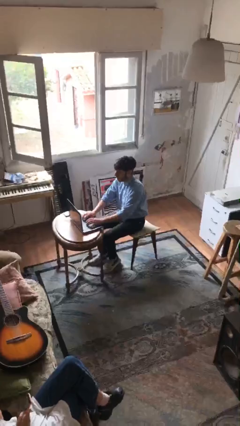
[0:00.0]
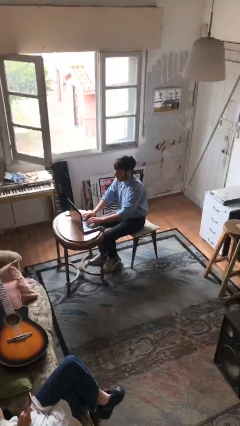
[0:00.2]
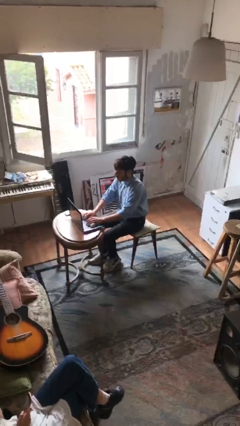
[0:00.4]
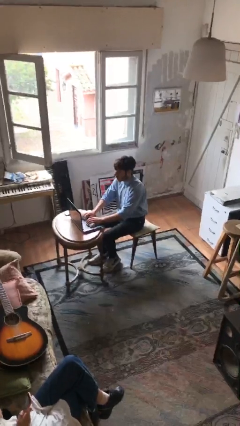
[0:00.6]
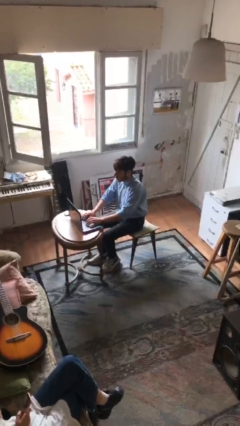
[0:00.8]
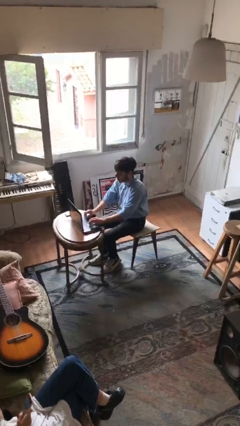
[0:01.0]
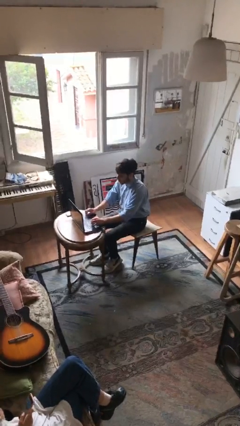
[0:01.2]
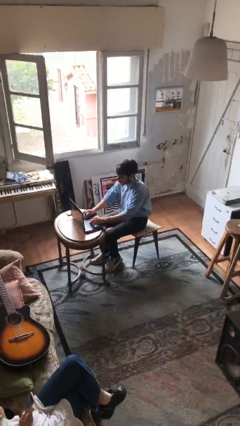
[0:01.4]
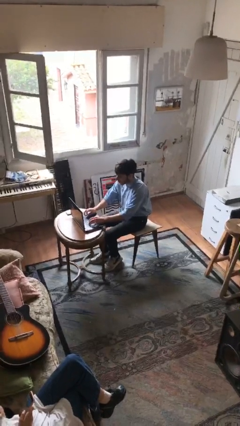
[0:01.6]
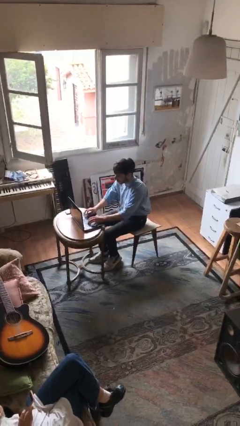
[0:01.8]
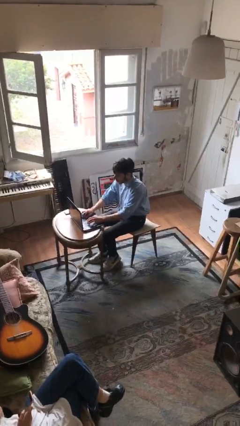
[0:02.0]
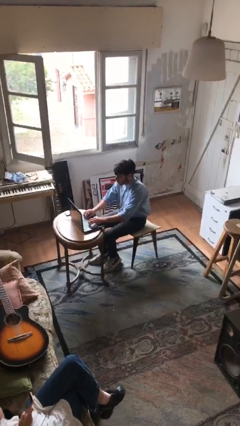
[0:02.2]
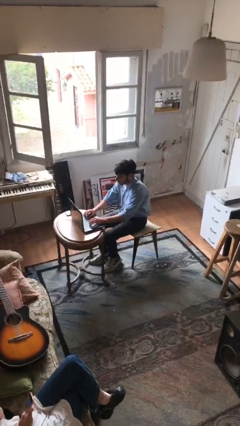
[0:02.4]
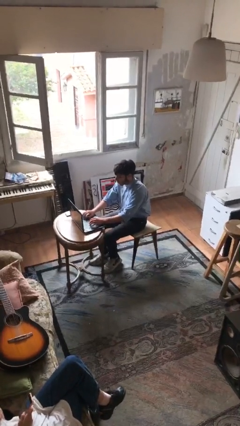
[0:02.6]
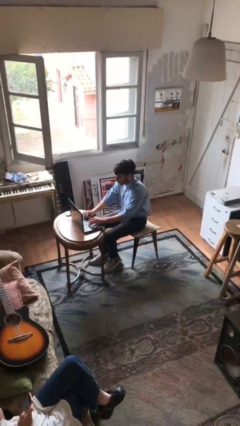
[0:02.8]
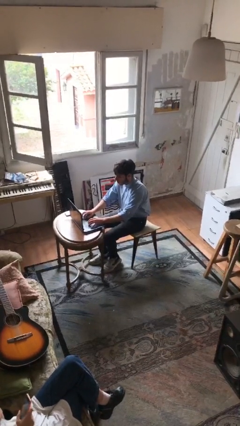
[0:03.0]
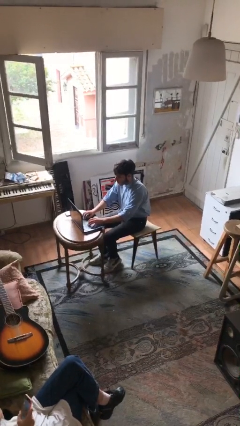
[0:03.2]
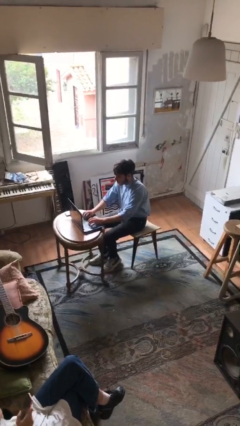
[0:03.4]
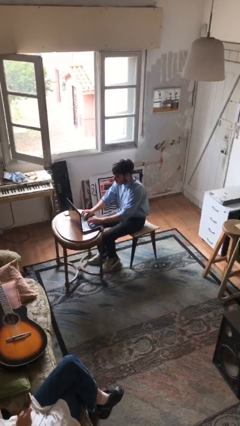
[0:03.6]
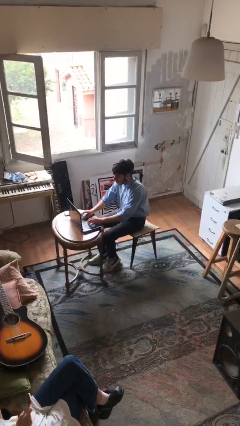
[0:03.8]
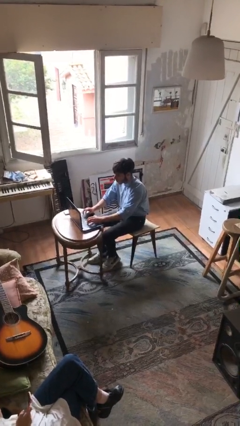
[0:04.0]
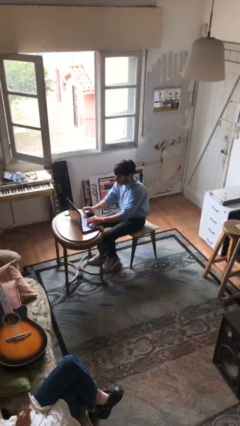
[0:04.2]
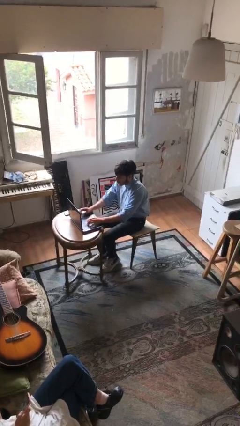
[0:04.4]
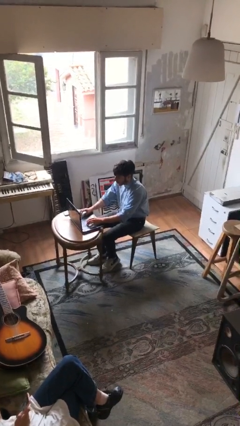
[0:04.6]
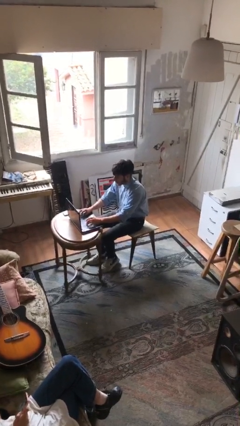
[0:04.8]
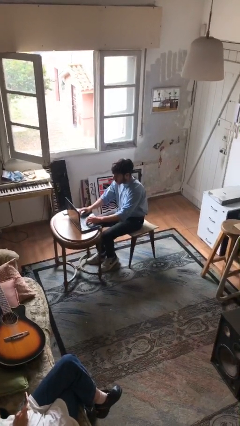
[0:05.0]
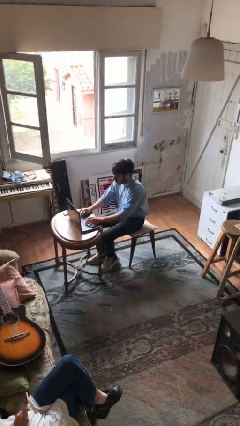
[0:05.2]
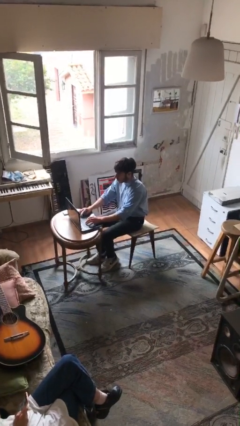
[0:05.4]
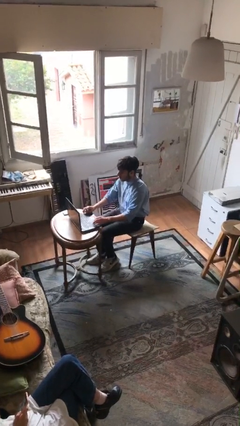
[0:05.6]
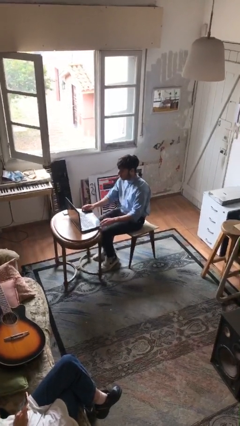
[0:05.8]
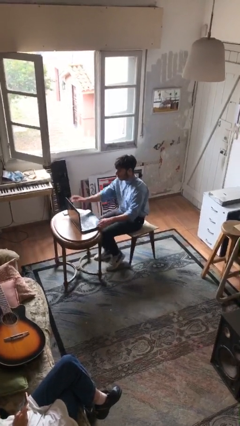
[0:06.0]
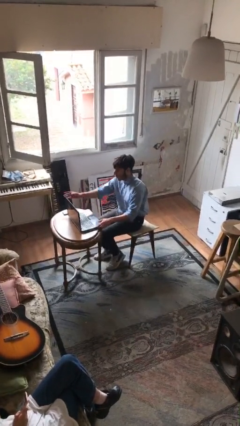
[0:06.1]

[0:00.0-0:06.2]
person interacts with laptop

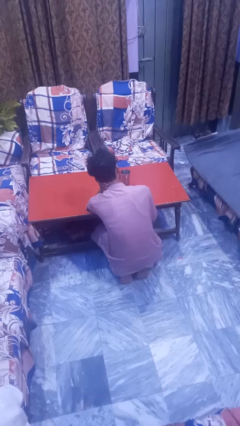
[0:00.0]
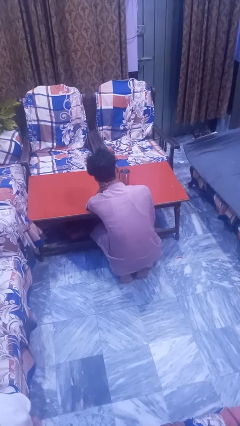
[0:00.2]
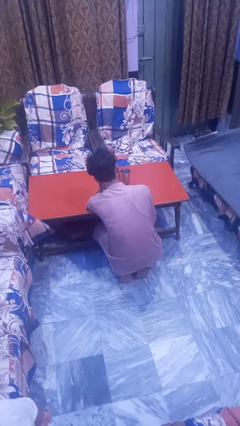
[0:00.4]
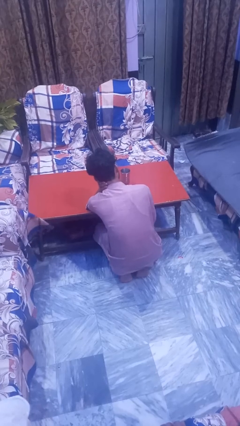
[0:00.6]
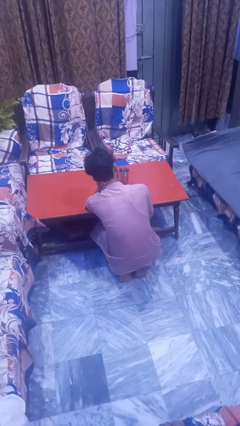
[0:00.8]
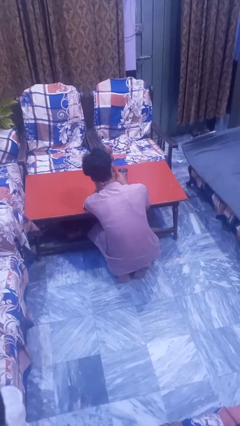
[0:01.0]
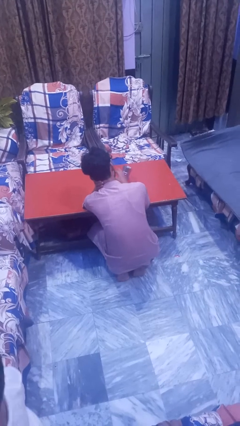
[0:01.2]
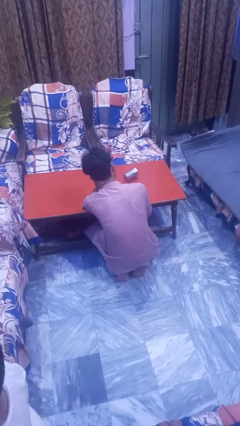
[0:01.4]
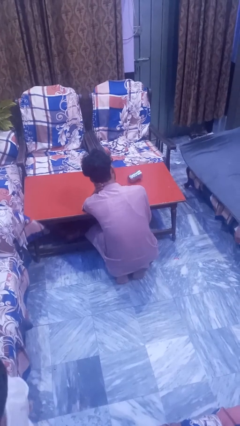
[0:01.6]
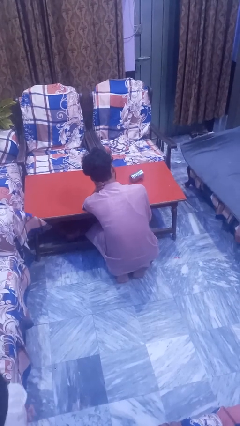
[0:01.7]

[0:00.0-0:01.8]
person knocks over glass

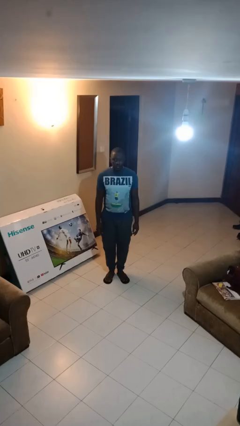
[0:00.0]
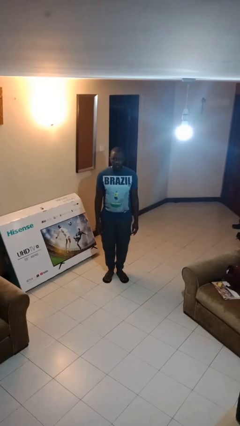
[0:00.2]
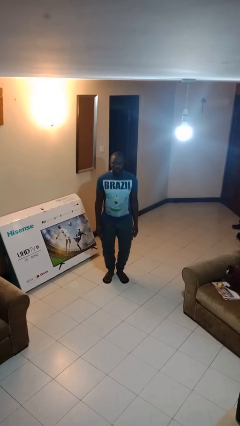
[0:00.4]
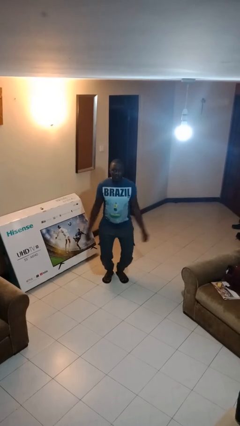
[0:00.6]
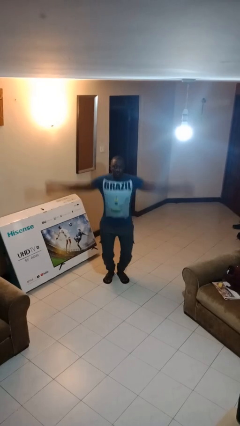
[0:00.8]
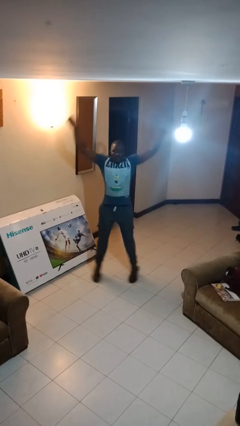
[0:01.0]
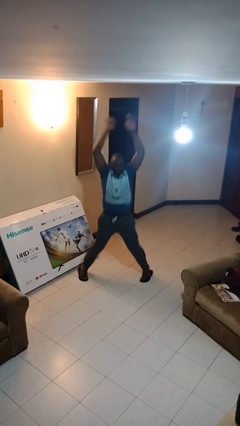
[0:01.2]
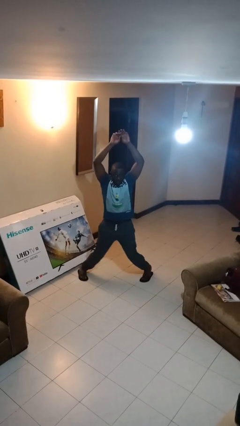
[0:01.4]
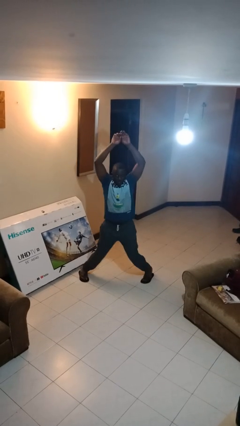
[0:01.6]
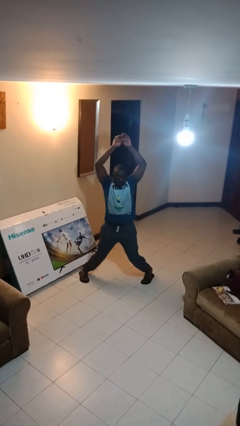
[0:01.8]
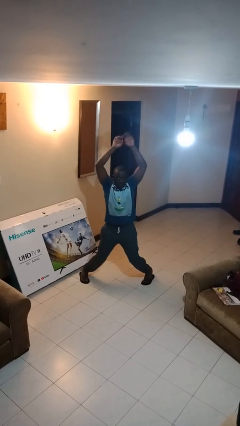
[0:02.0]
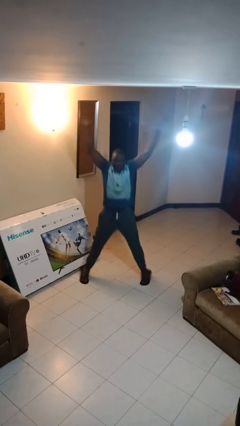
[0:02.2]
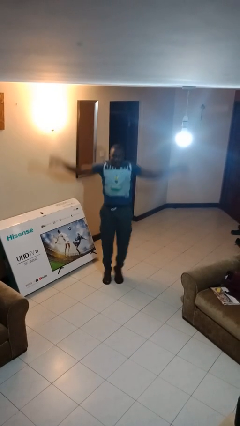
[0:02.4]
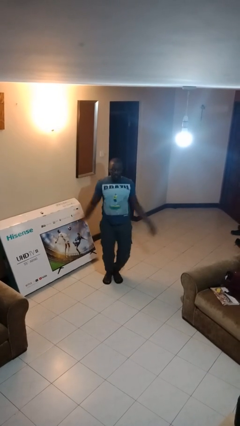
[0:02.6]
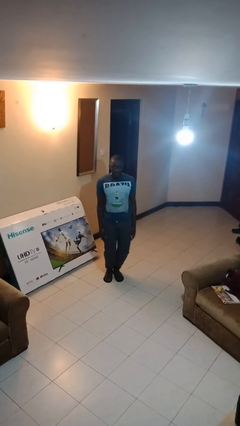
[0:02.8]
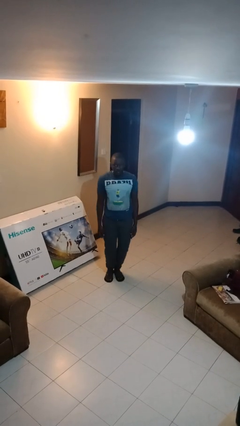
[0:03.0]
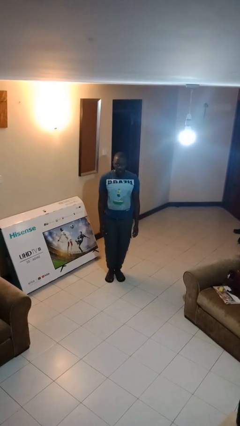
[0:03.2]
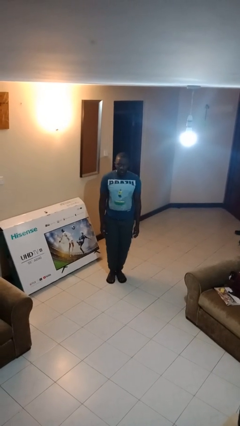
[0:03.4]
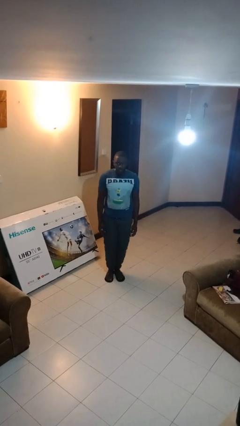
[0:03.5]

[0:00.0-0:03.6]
person exercises with jumping jacks

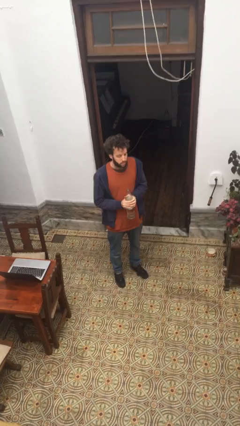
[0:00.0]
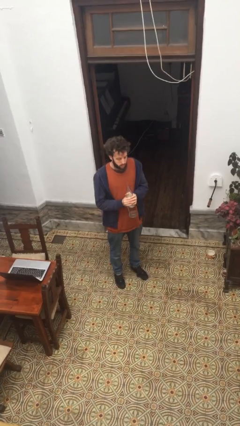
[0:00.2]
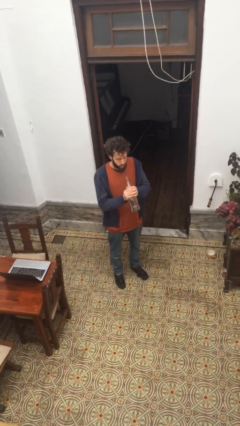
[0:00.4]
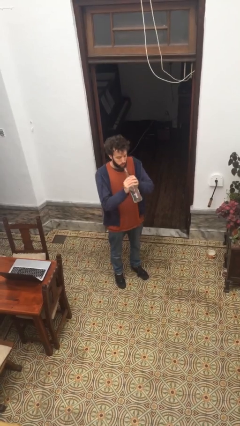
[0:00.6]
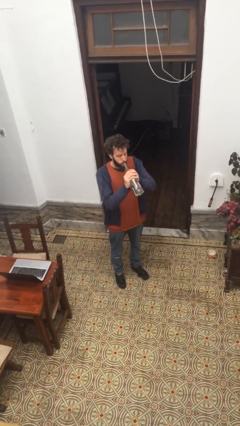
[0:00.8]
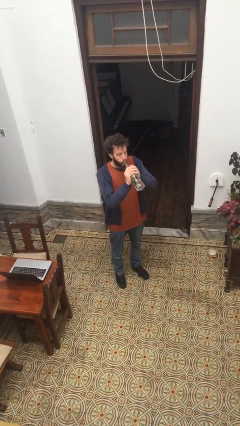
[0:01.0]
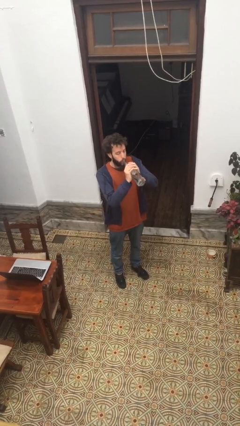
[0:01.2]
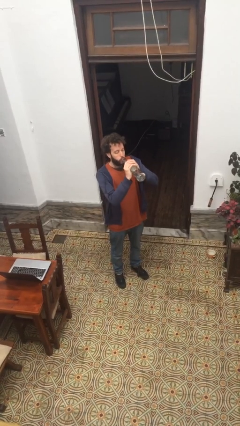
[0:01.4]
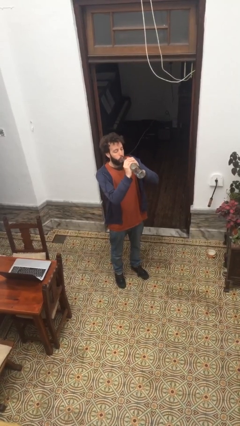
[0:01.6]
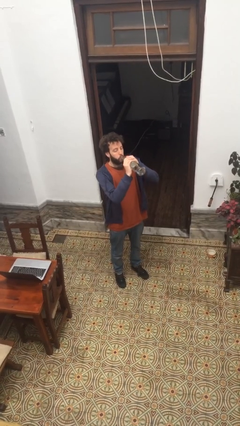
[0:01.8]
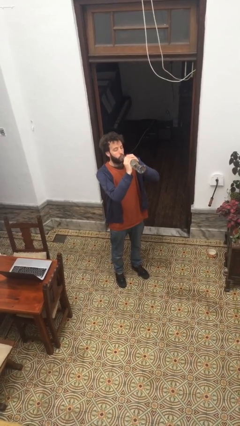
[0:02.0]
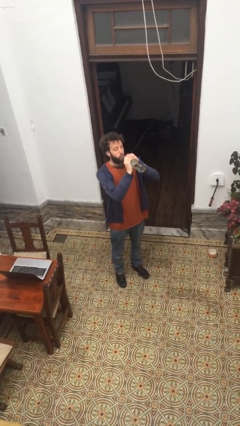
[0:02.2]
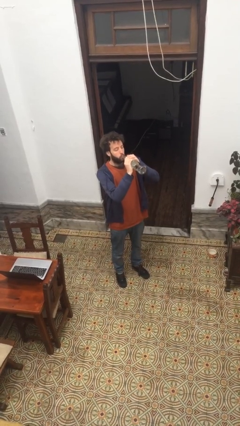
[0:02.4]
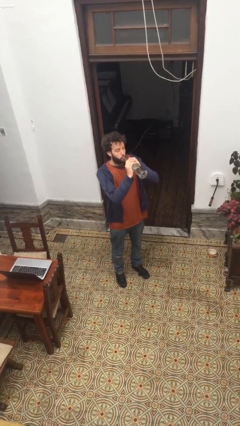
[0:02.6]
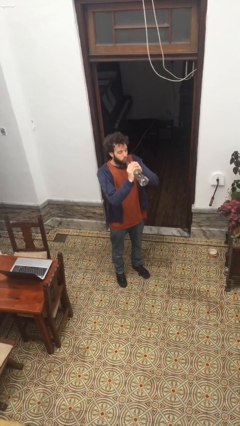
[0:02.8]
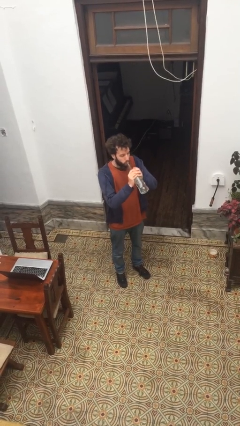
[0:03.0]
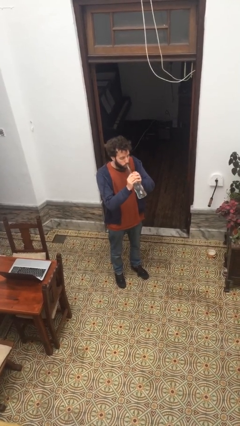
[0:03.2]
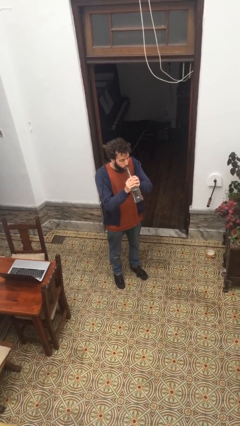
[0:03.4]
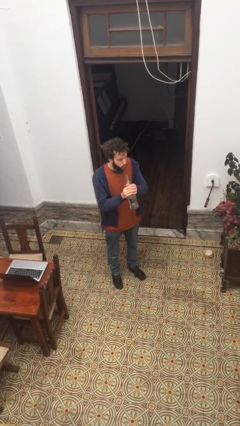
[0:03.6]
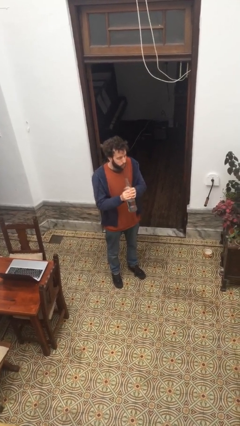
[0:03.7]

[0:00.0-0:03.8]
person drinks from bottle

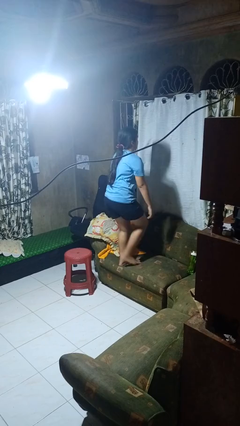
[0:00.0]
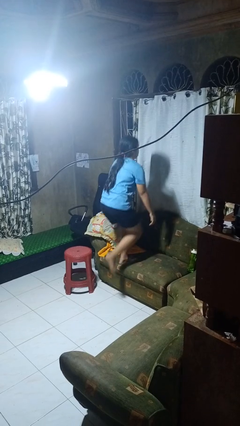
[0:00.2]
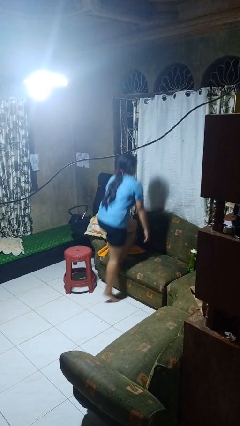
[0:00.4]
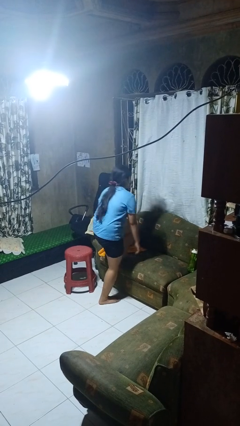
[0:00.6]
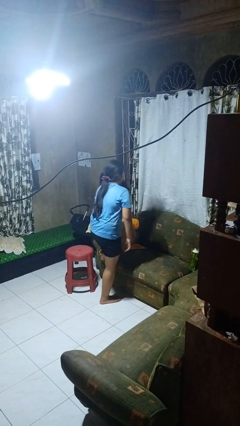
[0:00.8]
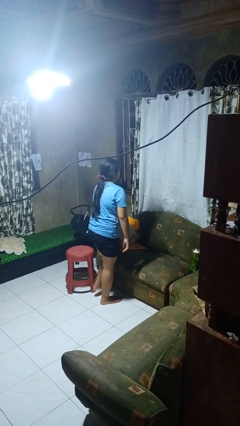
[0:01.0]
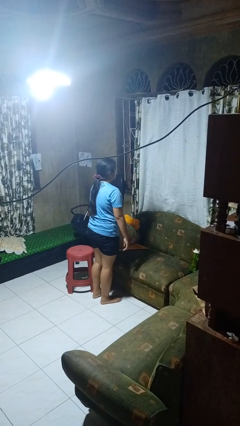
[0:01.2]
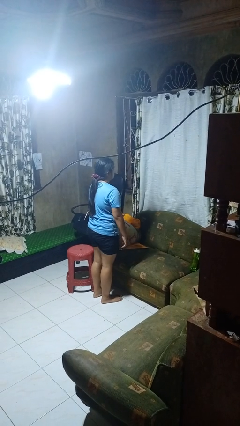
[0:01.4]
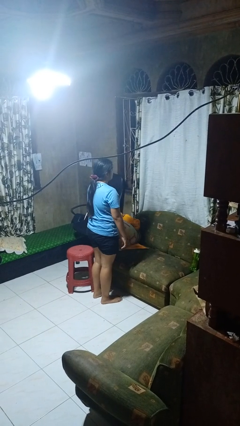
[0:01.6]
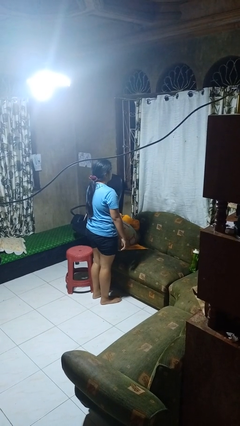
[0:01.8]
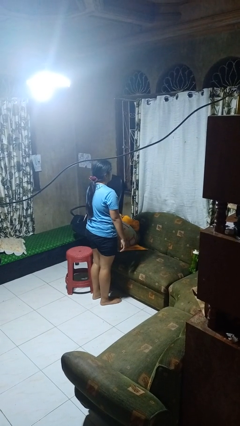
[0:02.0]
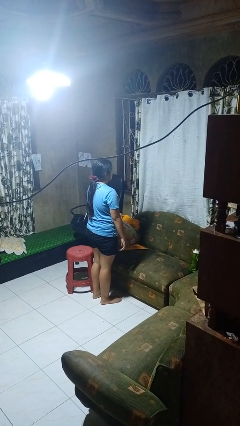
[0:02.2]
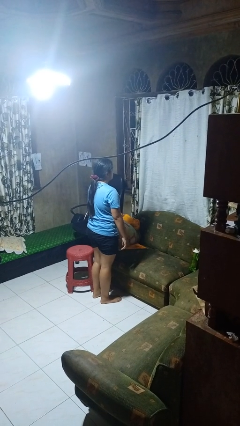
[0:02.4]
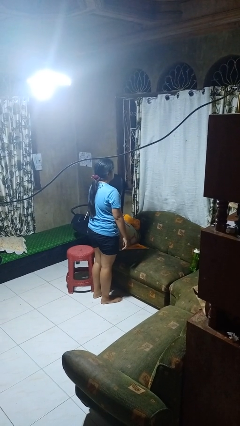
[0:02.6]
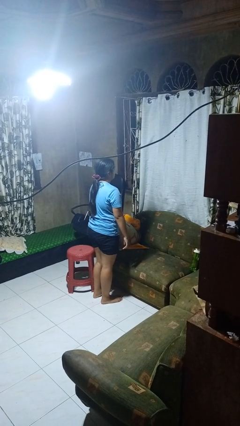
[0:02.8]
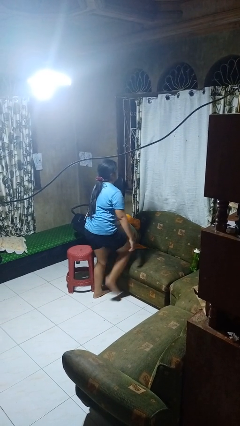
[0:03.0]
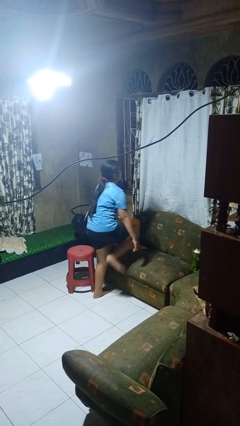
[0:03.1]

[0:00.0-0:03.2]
person climbs off couch
